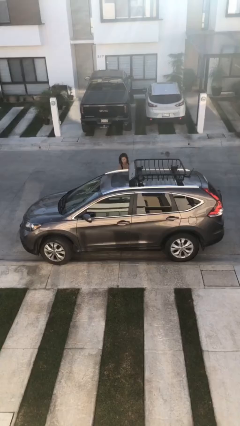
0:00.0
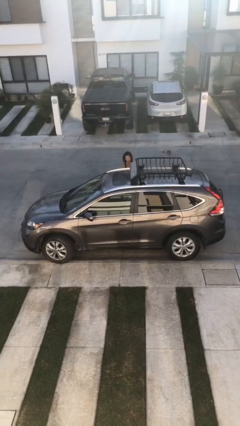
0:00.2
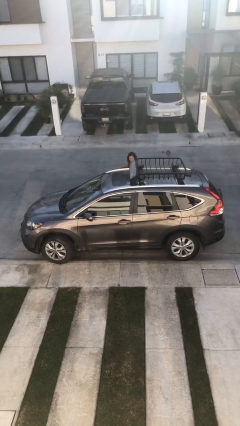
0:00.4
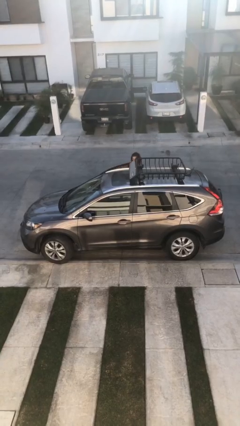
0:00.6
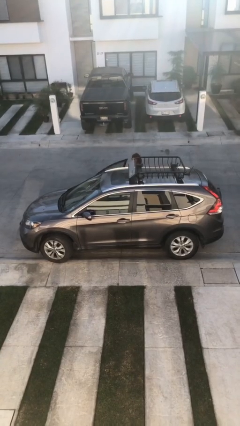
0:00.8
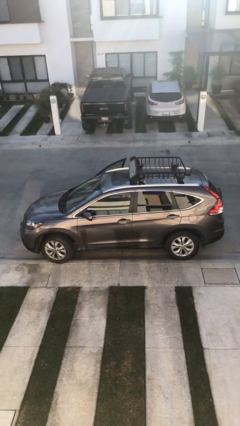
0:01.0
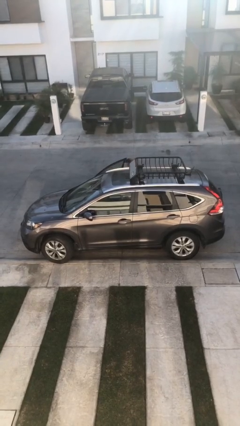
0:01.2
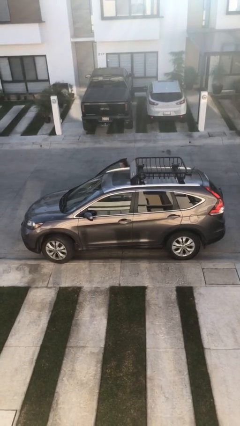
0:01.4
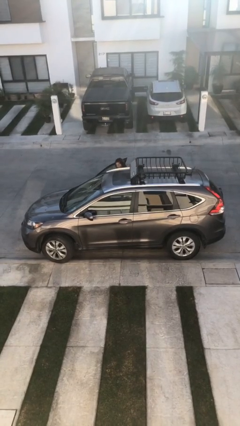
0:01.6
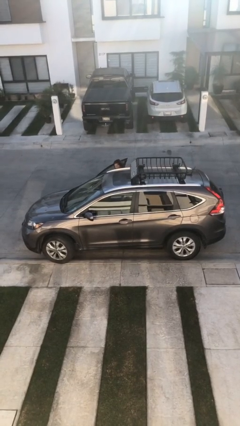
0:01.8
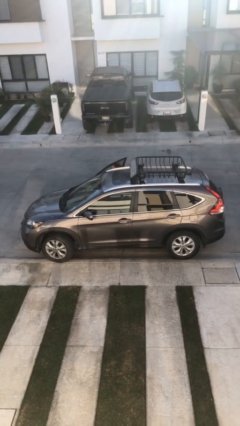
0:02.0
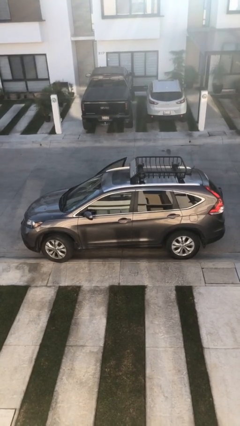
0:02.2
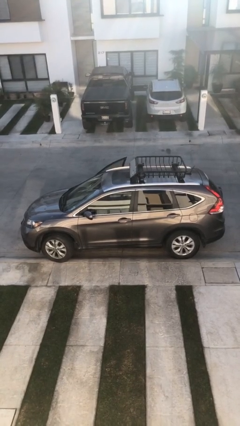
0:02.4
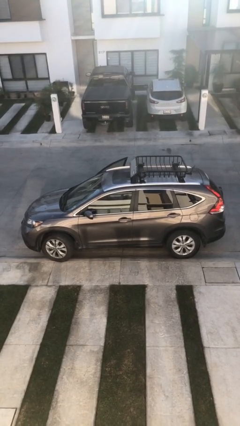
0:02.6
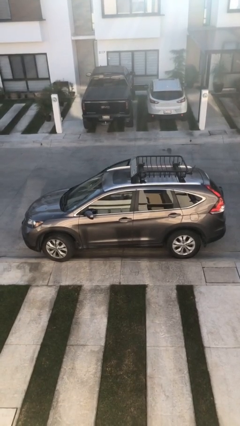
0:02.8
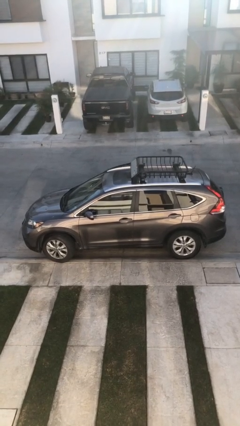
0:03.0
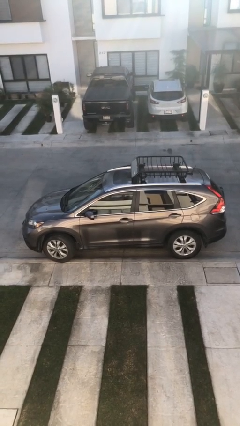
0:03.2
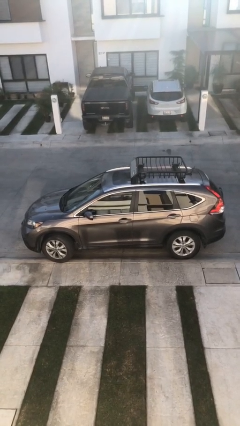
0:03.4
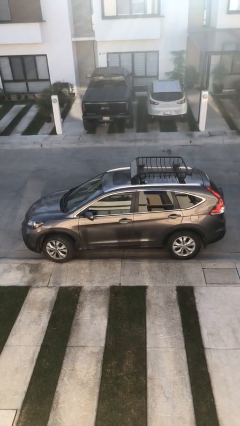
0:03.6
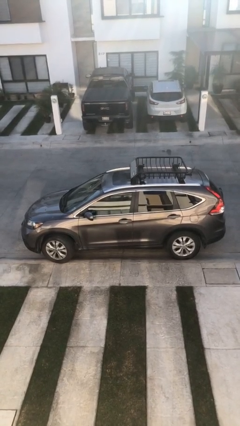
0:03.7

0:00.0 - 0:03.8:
car picks up person

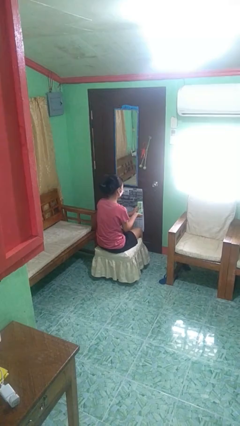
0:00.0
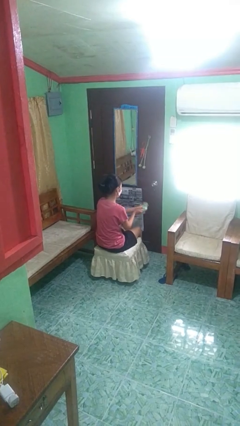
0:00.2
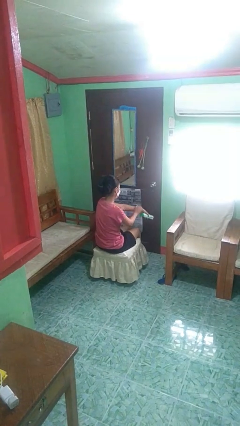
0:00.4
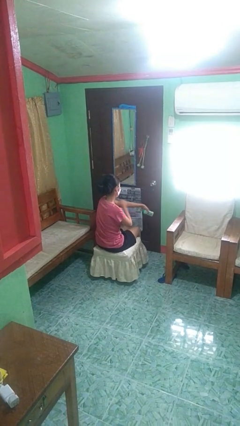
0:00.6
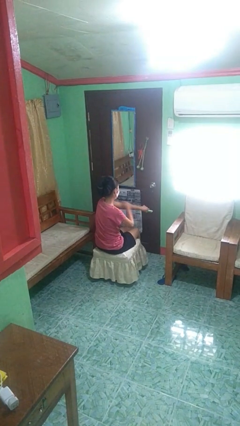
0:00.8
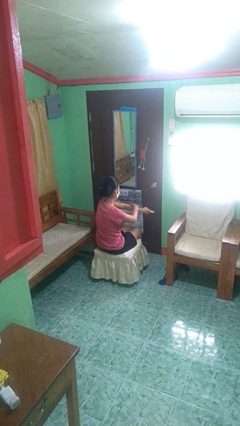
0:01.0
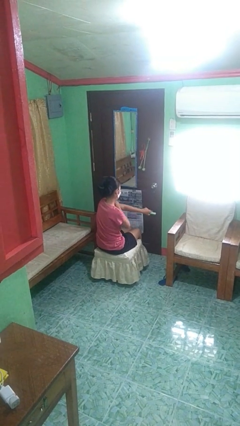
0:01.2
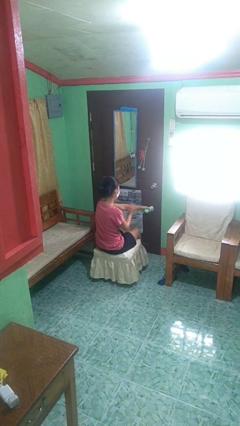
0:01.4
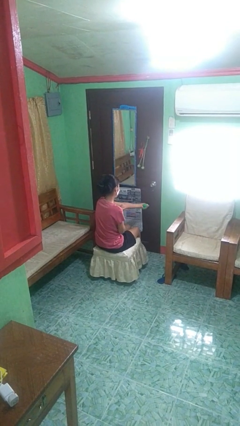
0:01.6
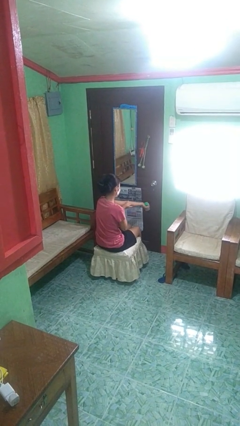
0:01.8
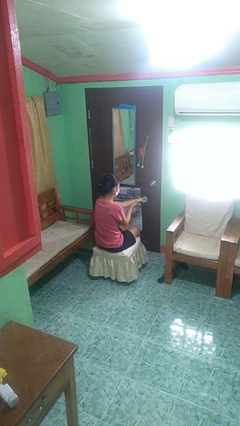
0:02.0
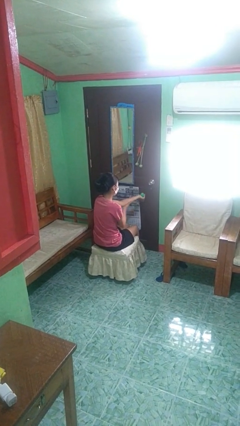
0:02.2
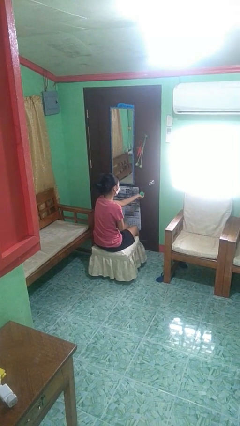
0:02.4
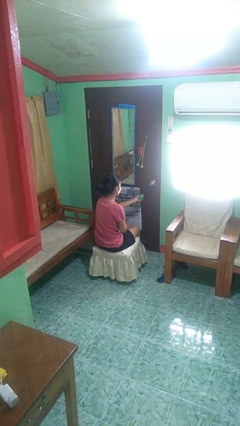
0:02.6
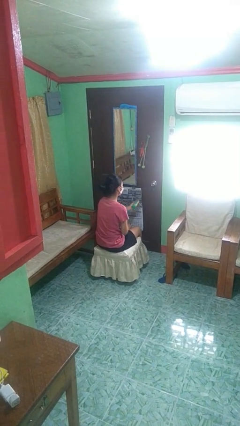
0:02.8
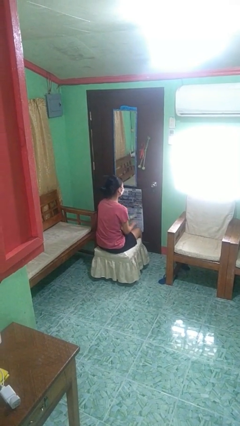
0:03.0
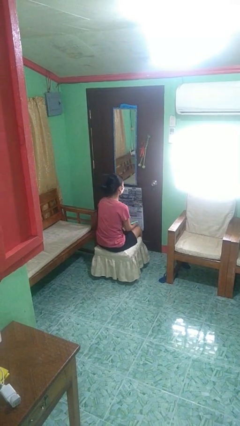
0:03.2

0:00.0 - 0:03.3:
person applies sunscreen

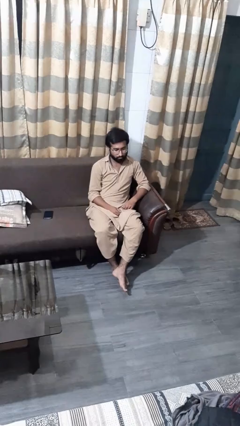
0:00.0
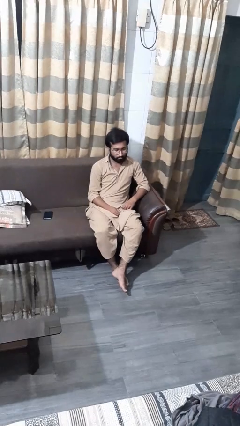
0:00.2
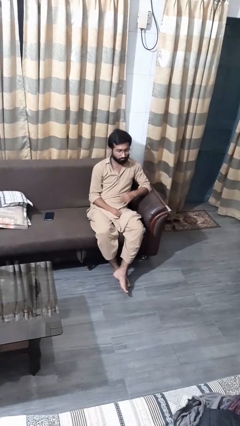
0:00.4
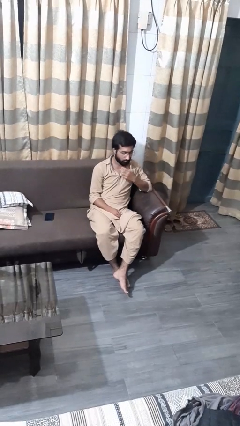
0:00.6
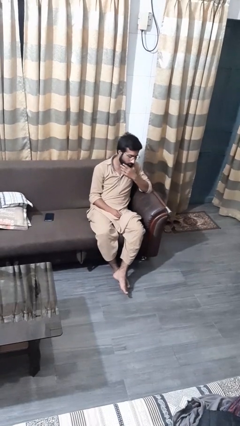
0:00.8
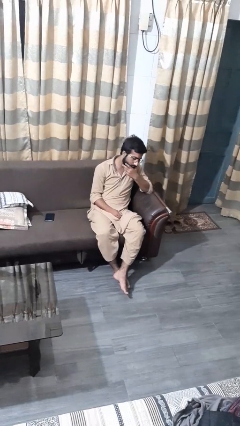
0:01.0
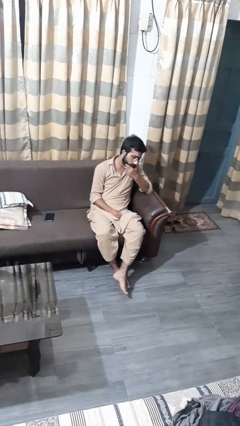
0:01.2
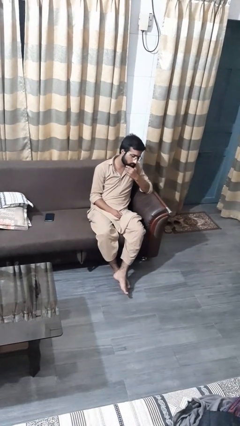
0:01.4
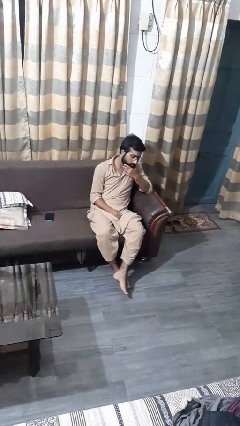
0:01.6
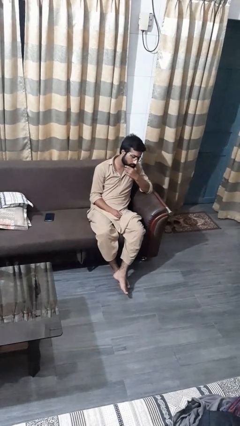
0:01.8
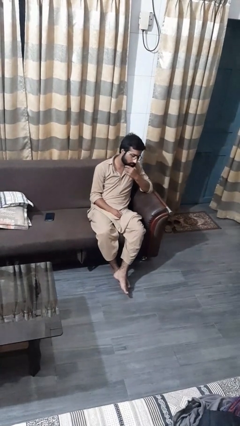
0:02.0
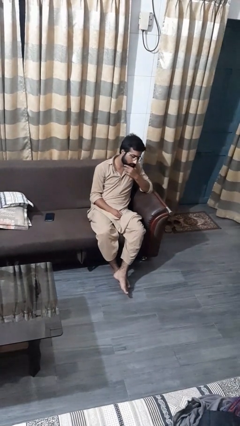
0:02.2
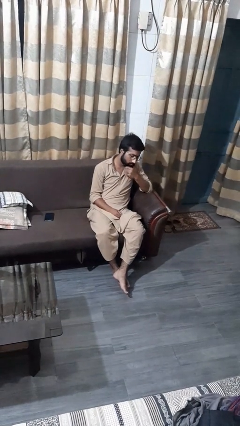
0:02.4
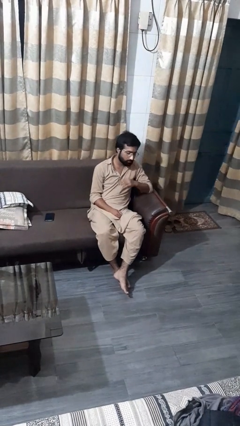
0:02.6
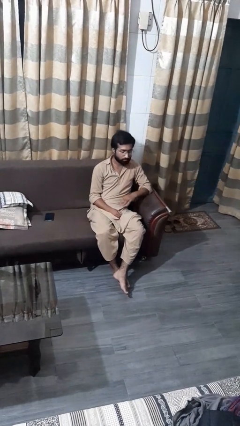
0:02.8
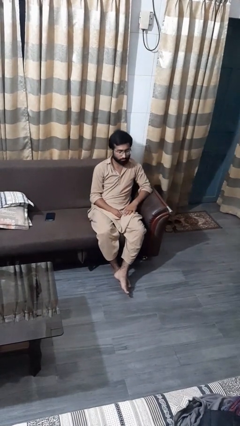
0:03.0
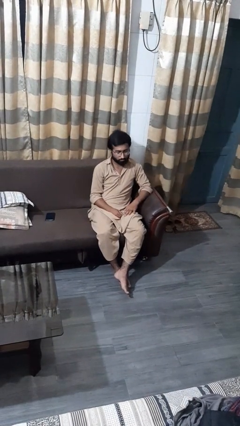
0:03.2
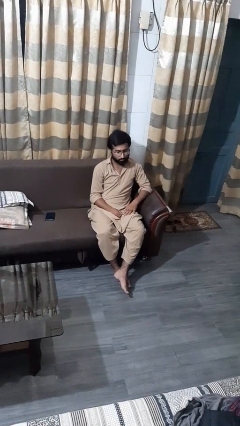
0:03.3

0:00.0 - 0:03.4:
person strokes chin

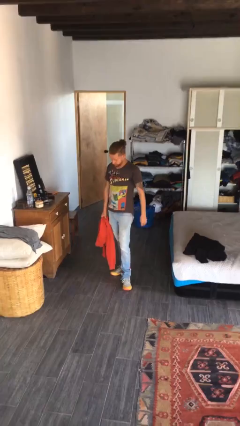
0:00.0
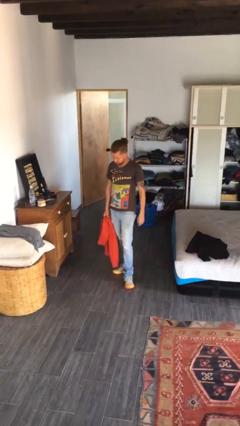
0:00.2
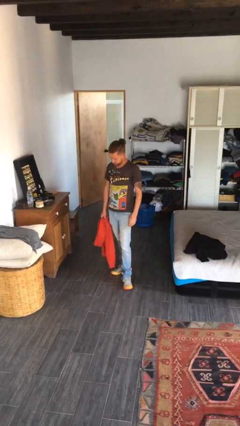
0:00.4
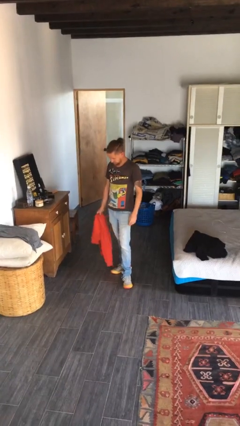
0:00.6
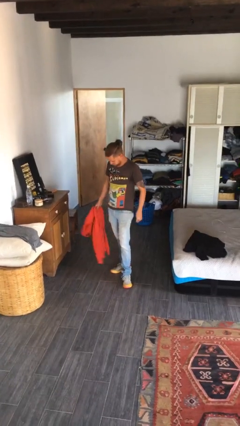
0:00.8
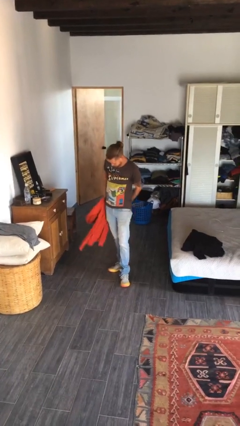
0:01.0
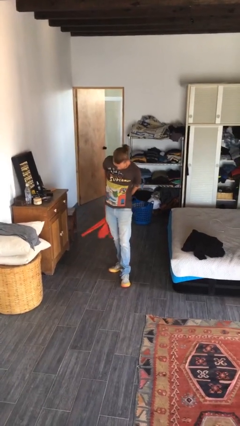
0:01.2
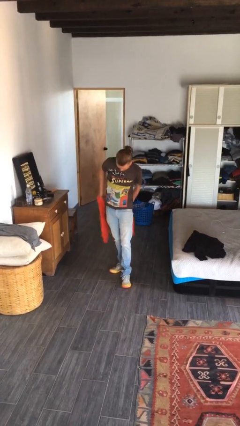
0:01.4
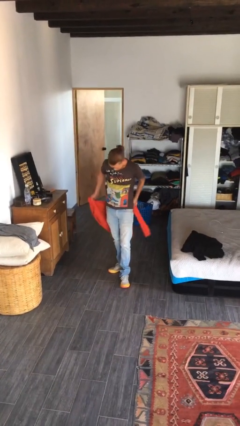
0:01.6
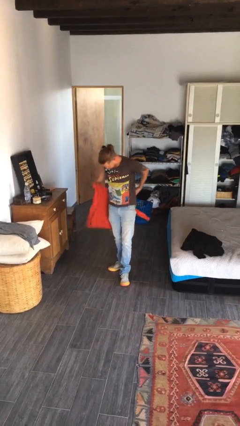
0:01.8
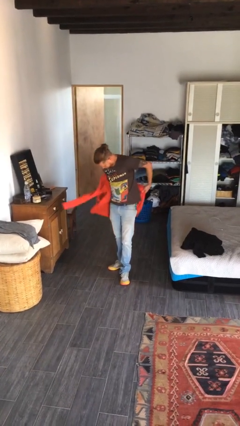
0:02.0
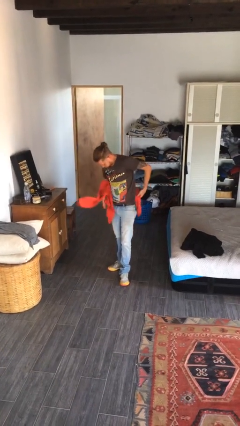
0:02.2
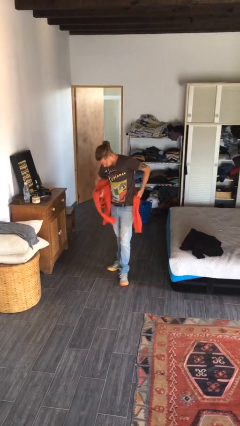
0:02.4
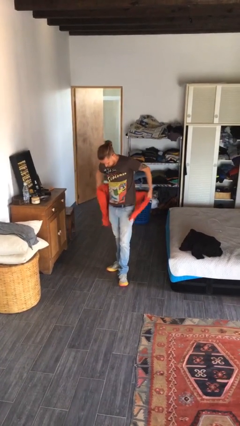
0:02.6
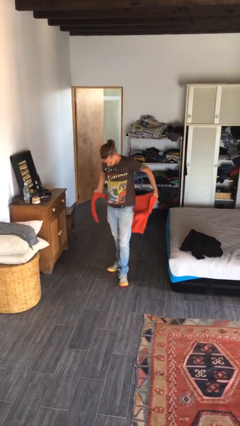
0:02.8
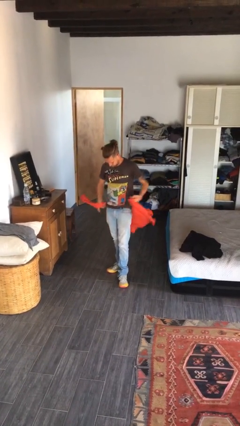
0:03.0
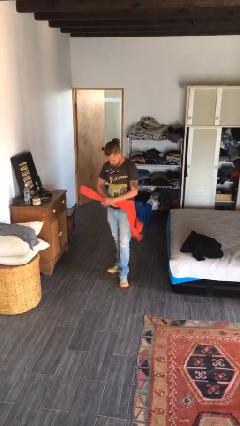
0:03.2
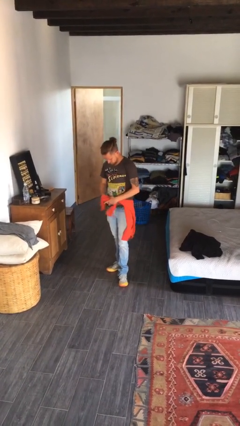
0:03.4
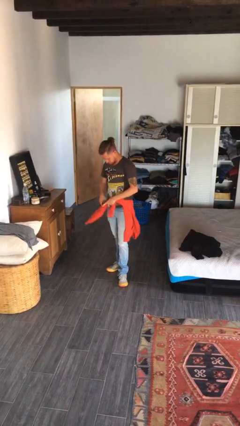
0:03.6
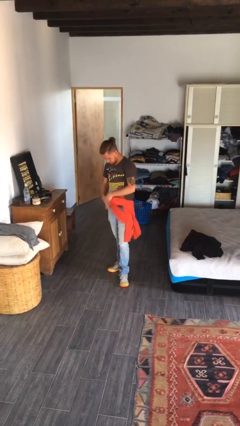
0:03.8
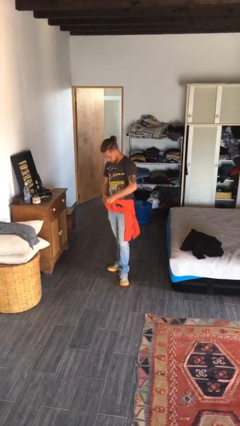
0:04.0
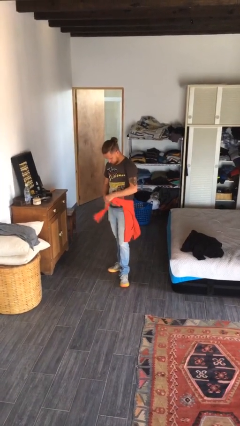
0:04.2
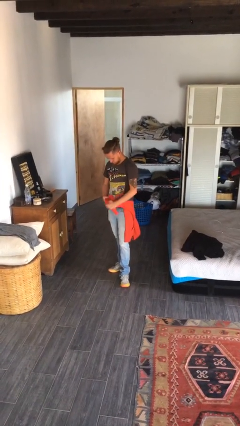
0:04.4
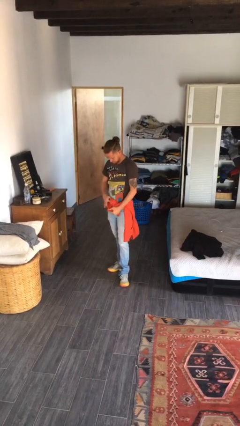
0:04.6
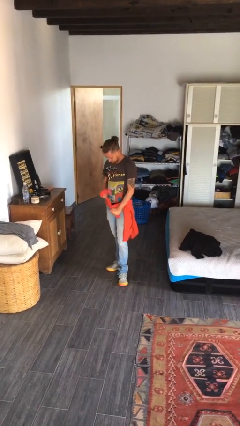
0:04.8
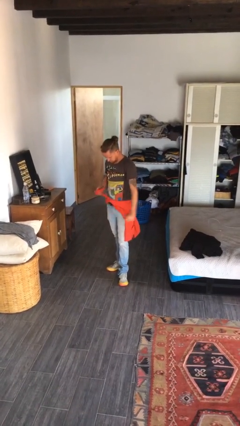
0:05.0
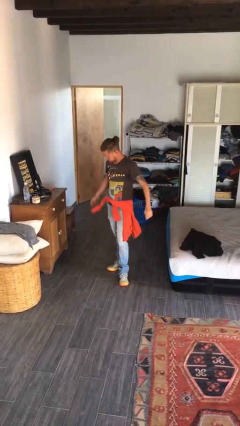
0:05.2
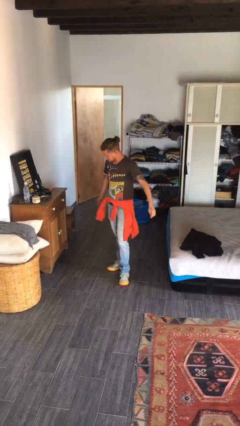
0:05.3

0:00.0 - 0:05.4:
person ties jacket around waist

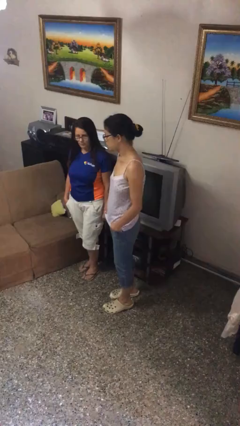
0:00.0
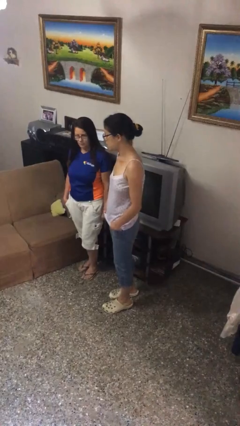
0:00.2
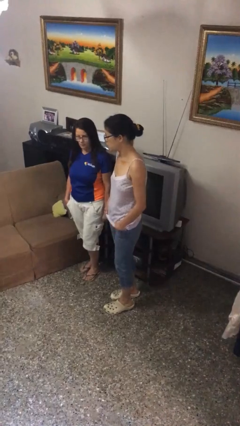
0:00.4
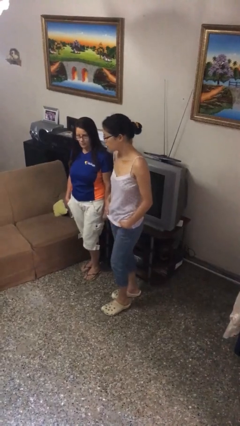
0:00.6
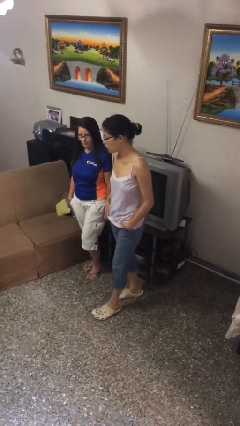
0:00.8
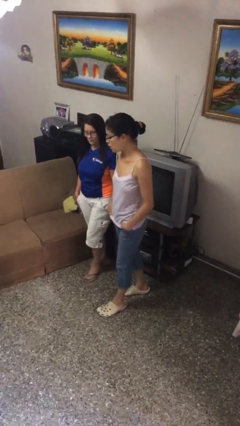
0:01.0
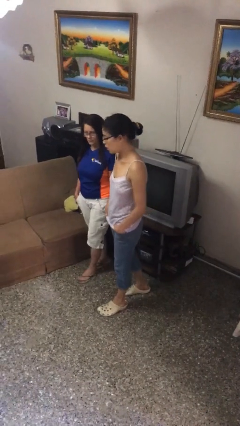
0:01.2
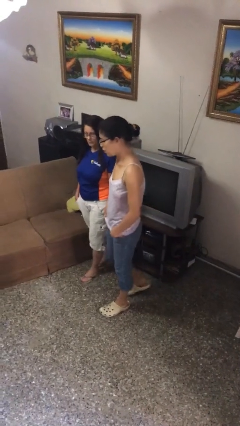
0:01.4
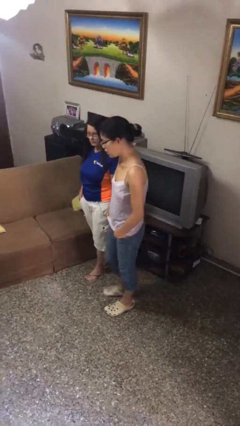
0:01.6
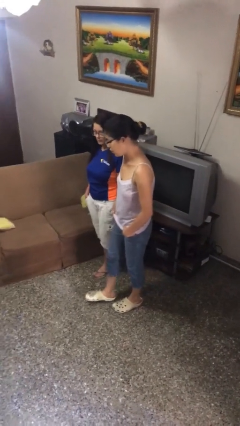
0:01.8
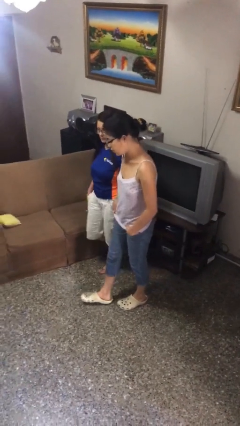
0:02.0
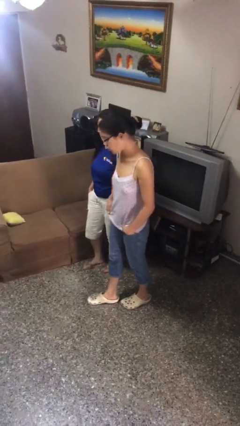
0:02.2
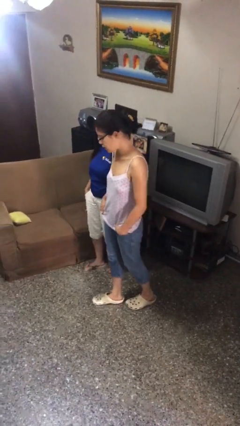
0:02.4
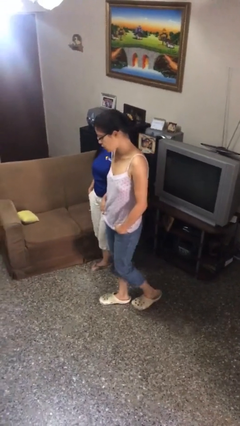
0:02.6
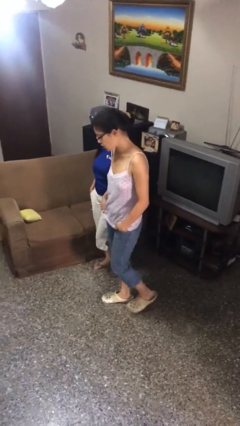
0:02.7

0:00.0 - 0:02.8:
person talks to person
